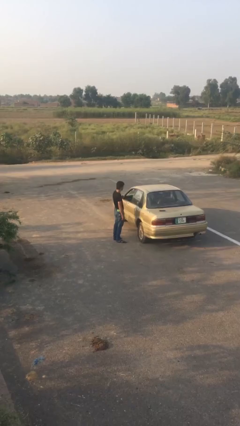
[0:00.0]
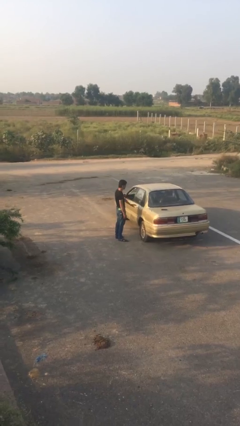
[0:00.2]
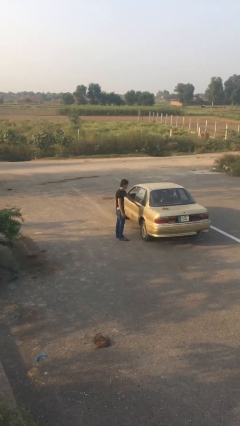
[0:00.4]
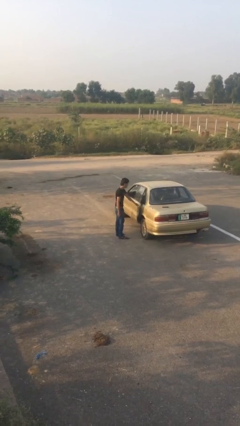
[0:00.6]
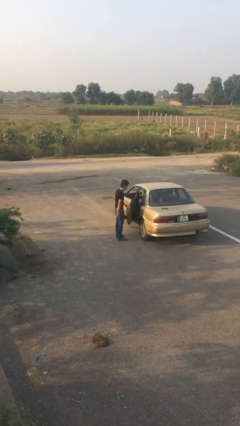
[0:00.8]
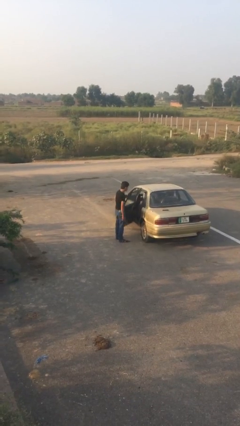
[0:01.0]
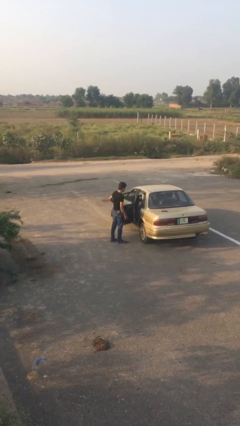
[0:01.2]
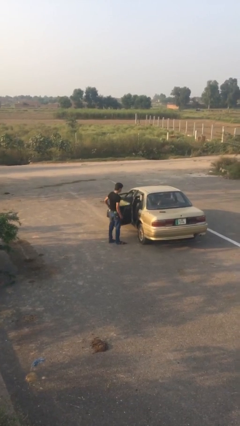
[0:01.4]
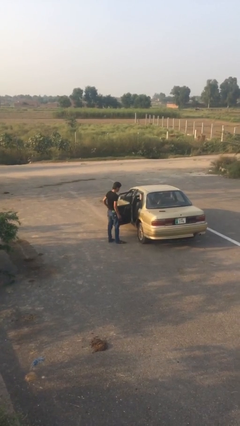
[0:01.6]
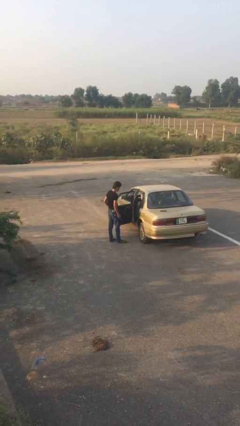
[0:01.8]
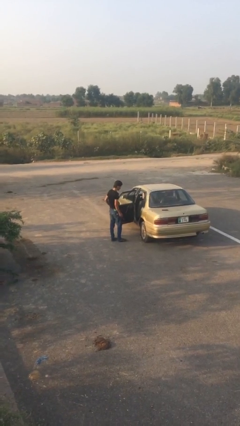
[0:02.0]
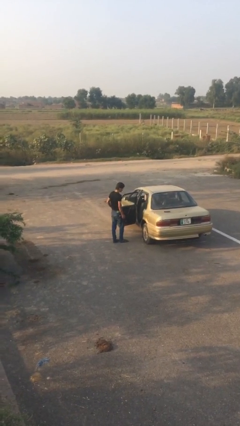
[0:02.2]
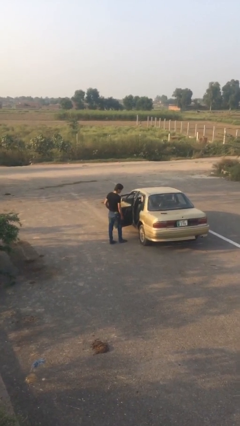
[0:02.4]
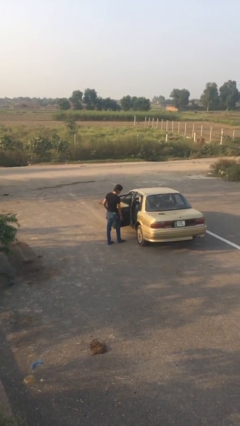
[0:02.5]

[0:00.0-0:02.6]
person opens car door

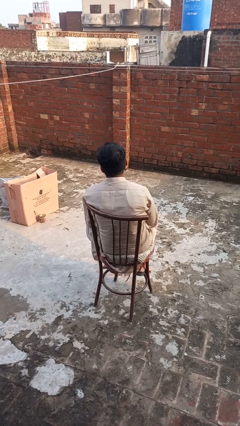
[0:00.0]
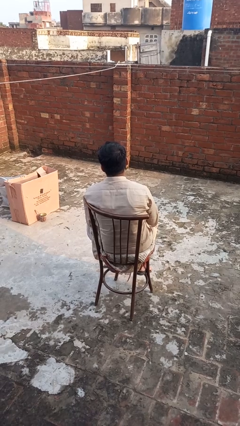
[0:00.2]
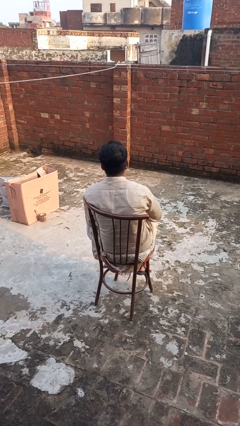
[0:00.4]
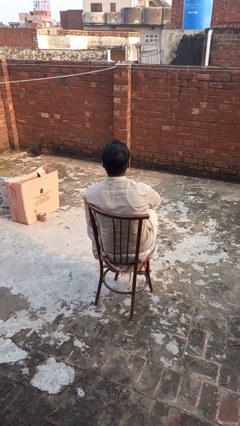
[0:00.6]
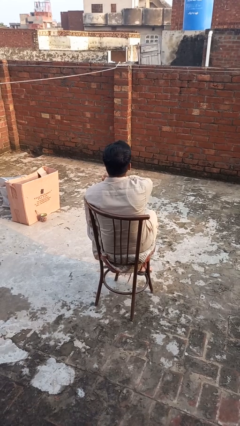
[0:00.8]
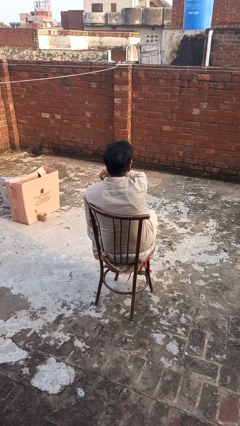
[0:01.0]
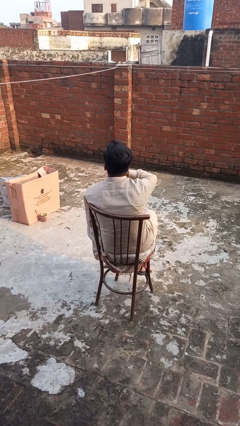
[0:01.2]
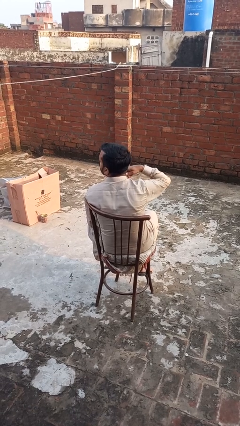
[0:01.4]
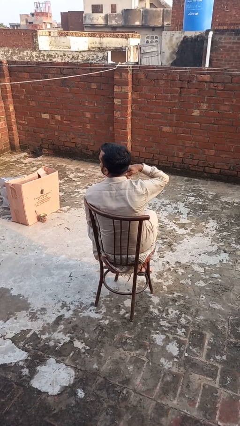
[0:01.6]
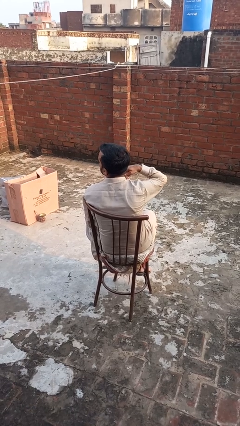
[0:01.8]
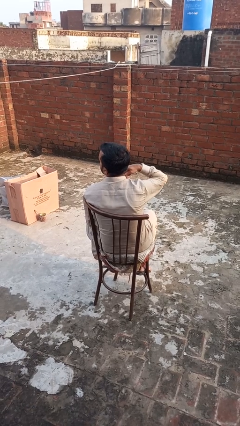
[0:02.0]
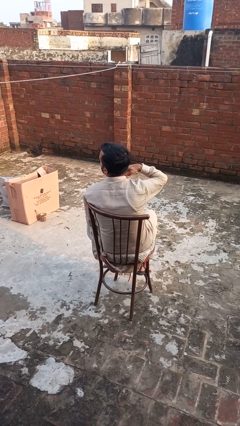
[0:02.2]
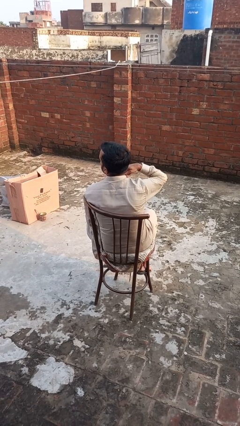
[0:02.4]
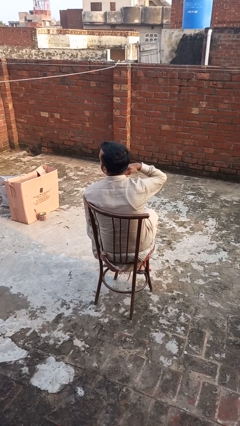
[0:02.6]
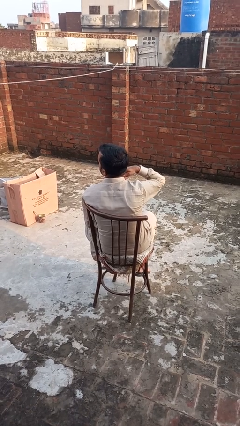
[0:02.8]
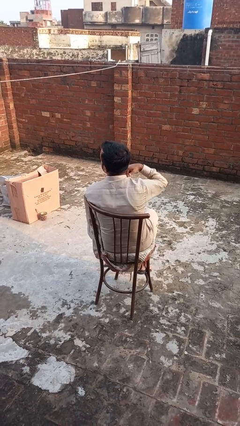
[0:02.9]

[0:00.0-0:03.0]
person gestures cut

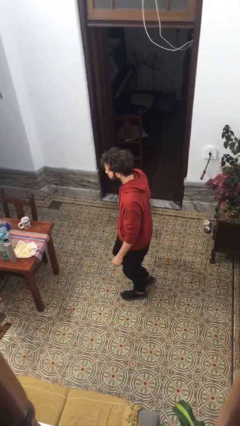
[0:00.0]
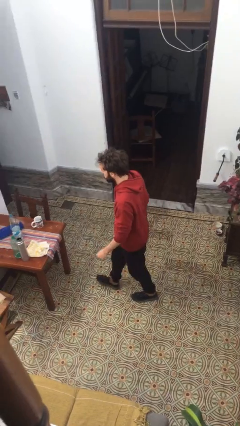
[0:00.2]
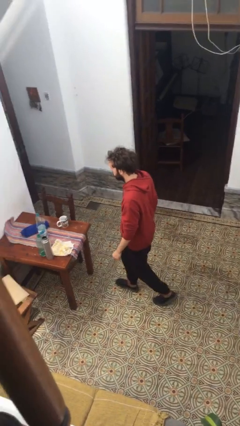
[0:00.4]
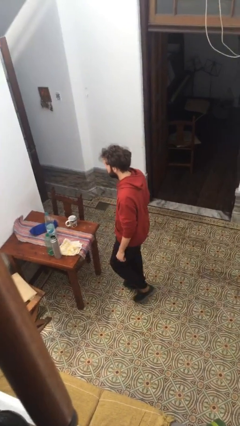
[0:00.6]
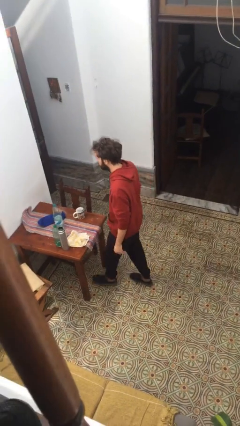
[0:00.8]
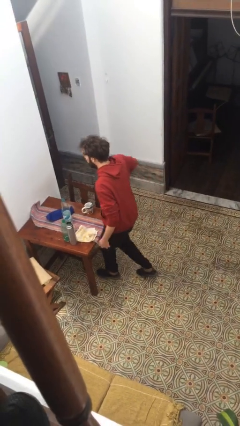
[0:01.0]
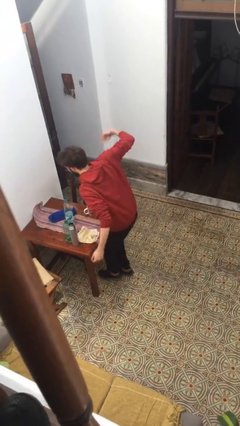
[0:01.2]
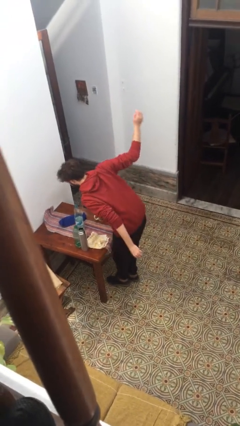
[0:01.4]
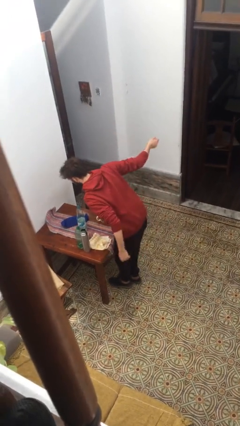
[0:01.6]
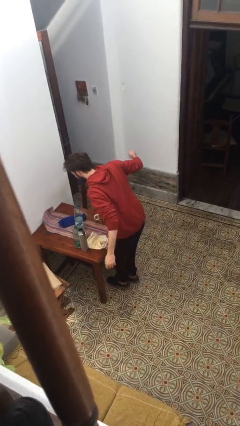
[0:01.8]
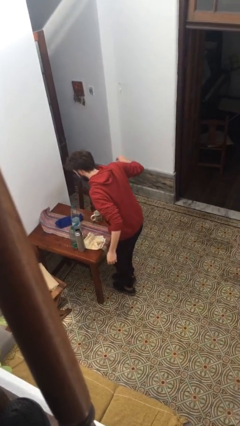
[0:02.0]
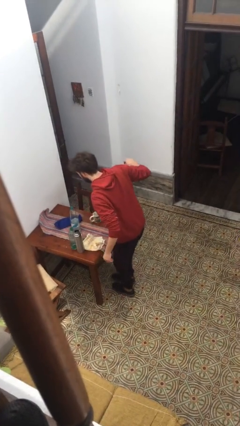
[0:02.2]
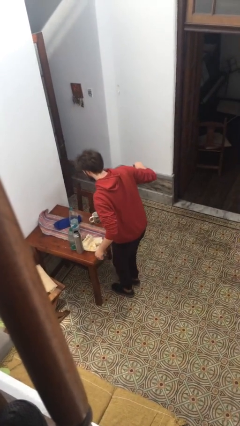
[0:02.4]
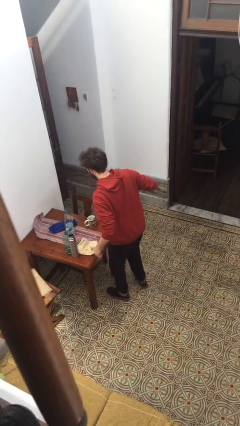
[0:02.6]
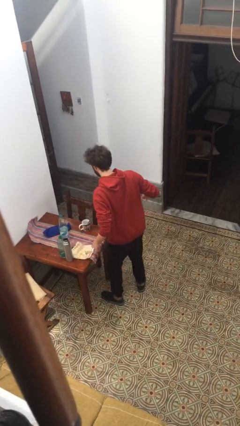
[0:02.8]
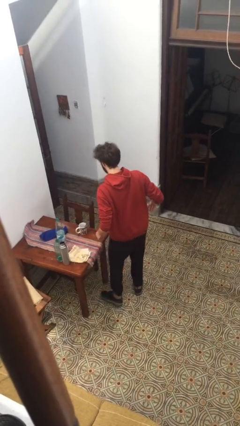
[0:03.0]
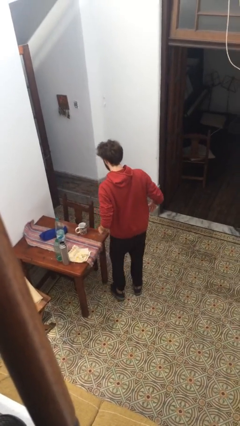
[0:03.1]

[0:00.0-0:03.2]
person bumps into table

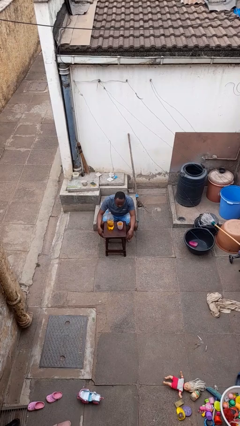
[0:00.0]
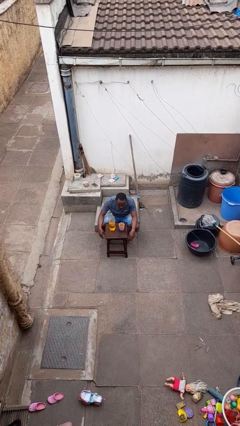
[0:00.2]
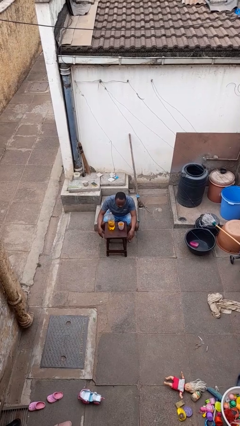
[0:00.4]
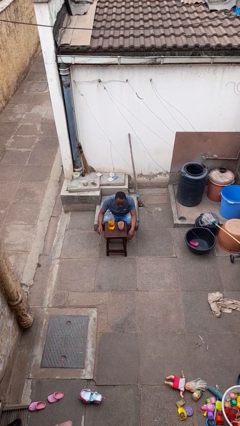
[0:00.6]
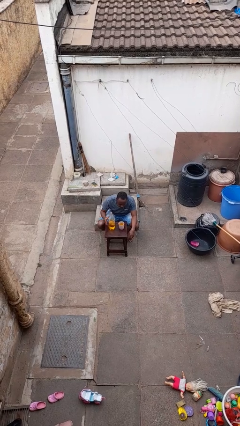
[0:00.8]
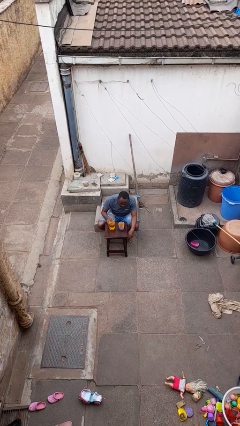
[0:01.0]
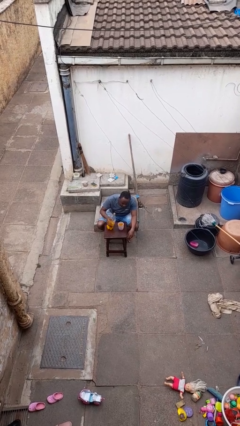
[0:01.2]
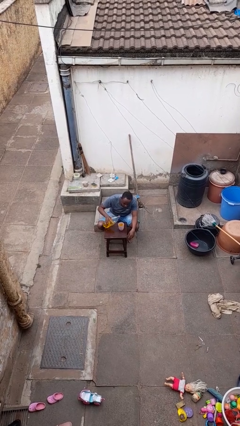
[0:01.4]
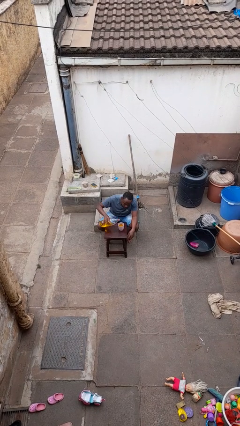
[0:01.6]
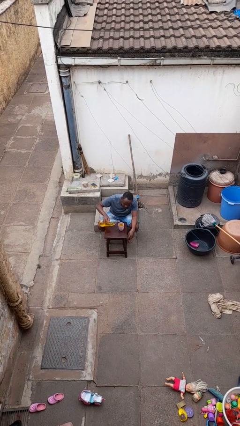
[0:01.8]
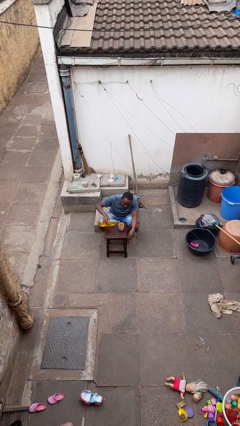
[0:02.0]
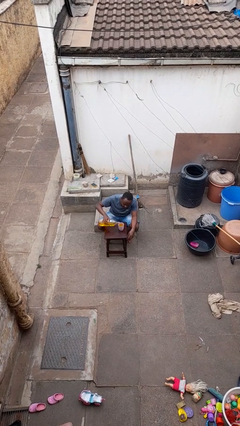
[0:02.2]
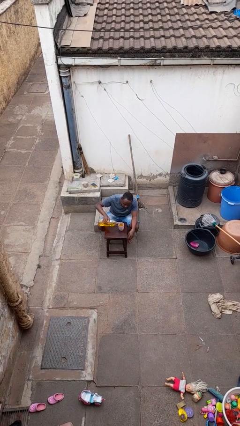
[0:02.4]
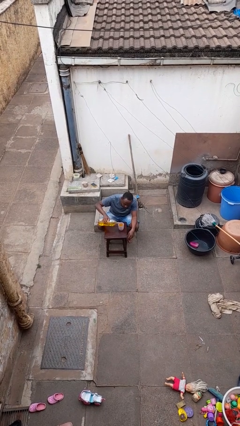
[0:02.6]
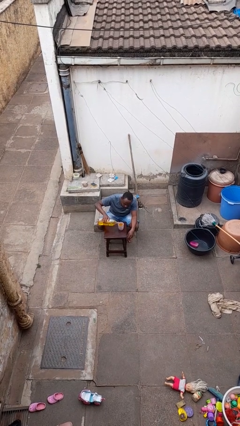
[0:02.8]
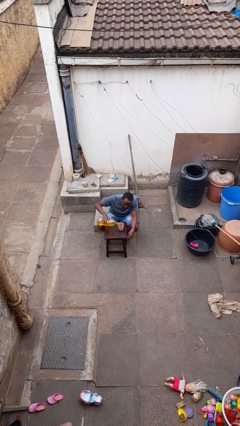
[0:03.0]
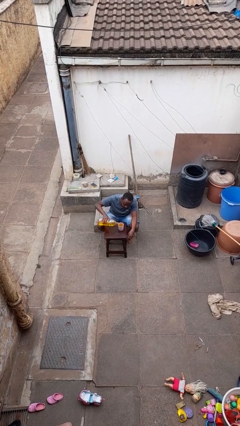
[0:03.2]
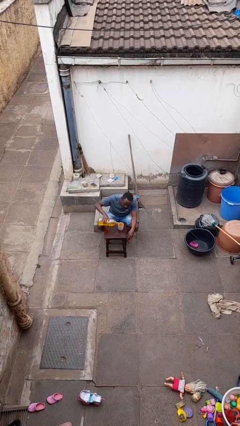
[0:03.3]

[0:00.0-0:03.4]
person pours liquid into cup

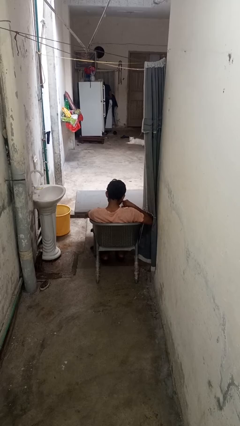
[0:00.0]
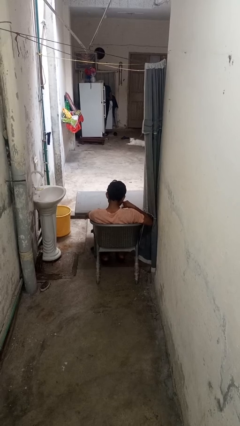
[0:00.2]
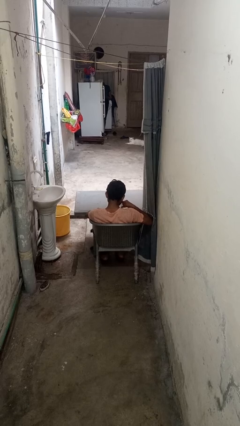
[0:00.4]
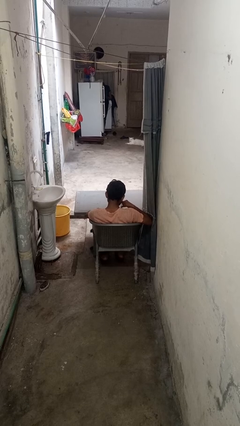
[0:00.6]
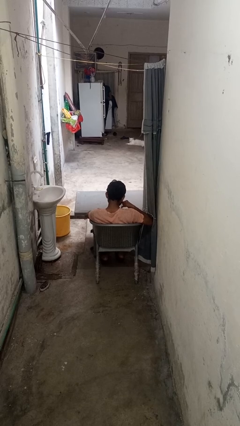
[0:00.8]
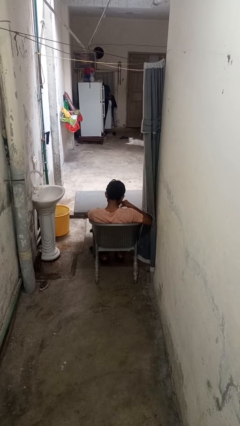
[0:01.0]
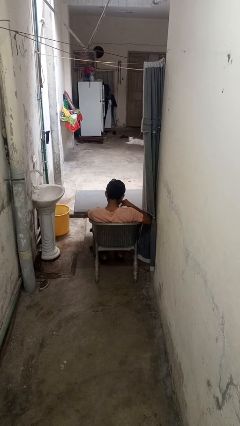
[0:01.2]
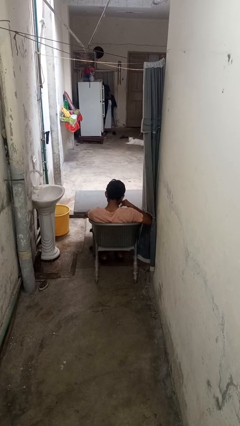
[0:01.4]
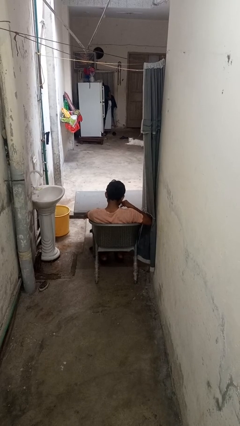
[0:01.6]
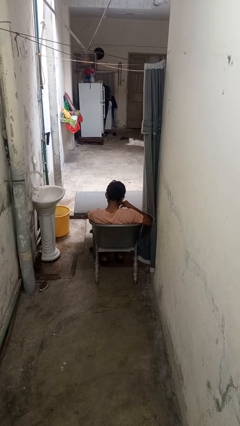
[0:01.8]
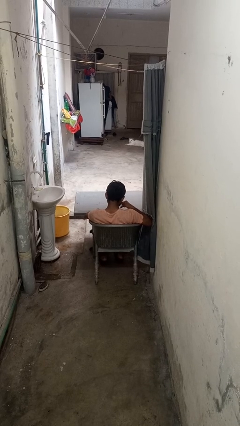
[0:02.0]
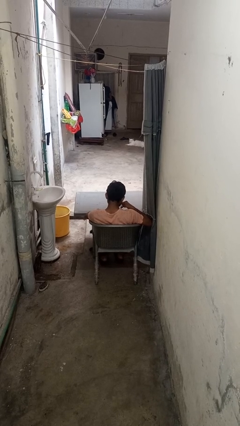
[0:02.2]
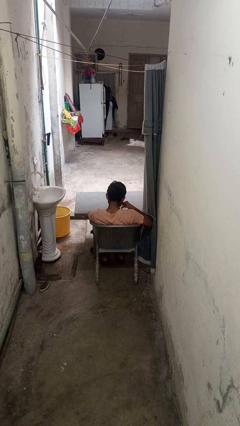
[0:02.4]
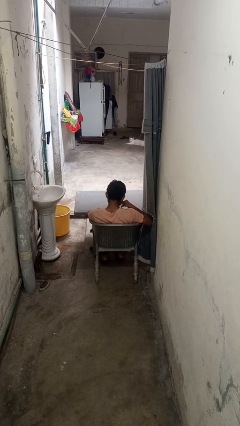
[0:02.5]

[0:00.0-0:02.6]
person drinks from mug

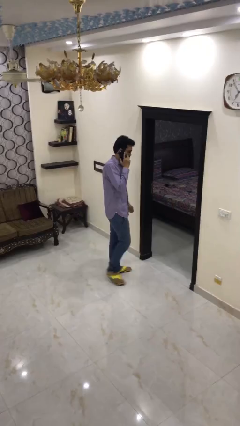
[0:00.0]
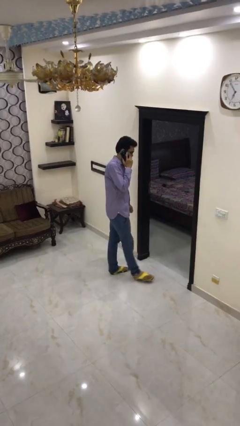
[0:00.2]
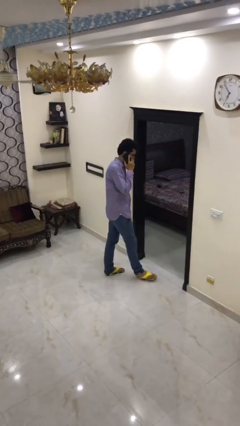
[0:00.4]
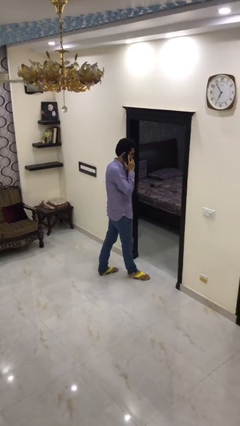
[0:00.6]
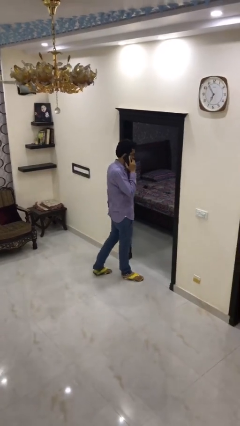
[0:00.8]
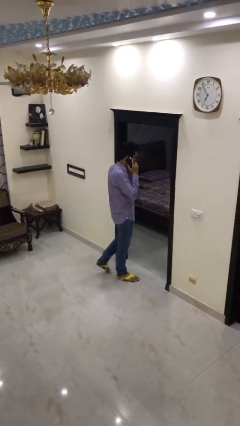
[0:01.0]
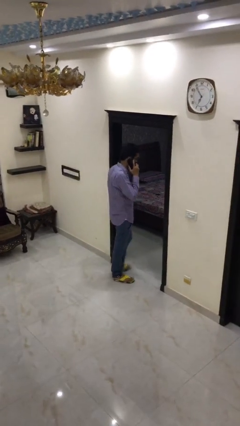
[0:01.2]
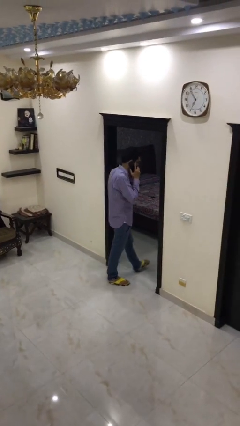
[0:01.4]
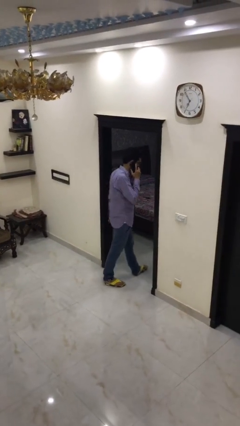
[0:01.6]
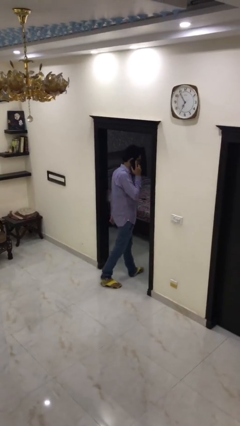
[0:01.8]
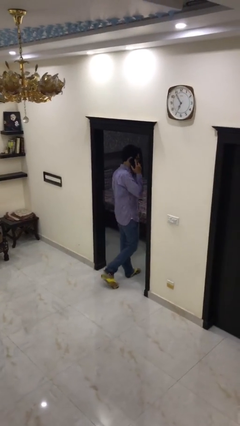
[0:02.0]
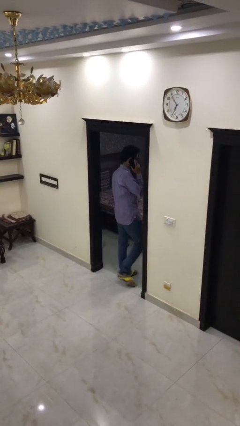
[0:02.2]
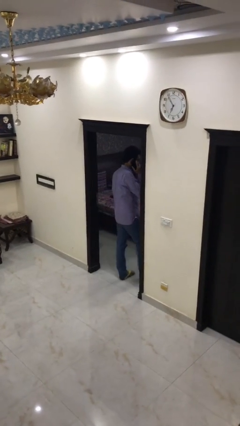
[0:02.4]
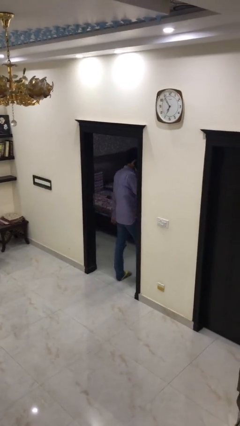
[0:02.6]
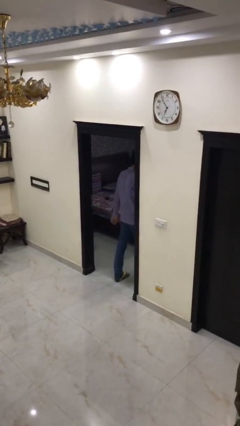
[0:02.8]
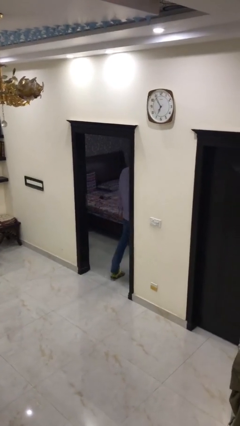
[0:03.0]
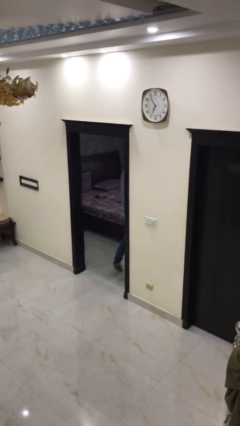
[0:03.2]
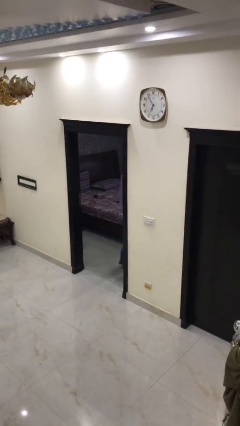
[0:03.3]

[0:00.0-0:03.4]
person exits scene through structure
